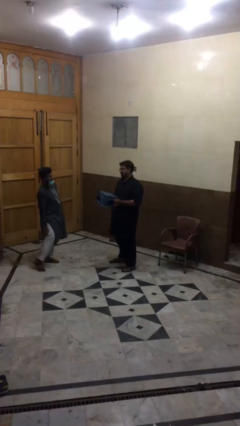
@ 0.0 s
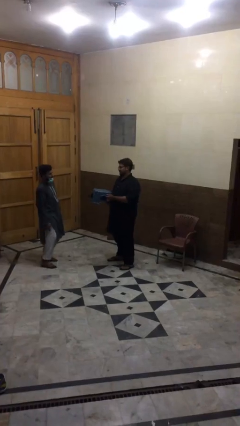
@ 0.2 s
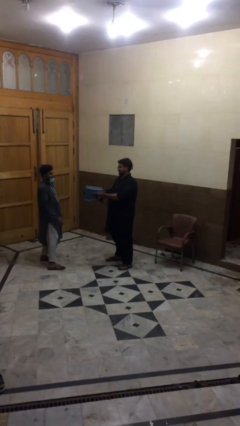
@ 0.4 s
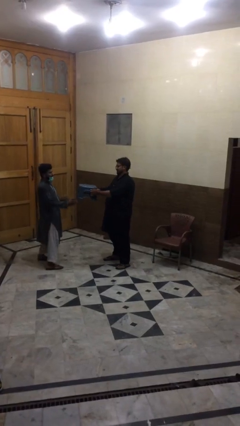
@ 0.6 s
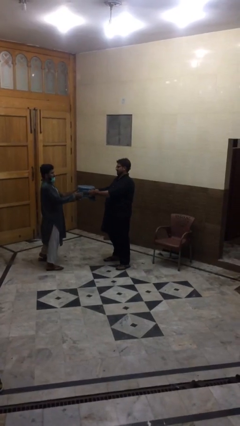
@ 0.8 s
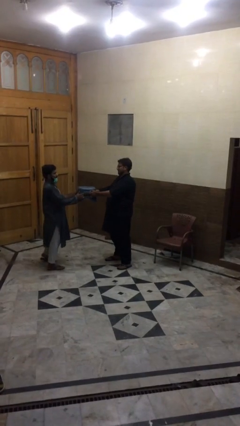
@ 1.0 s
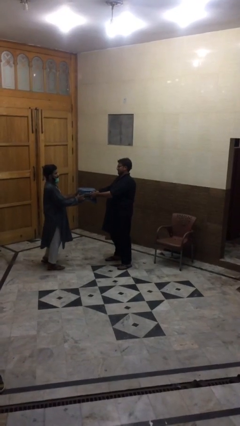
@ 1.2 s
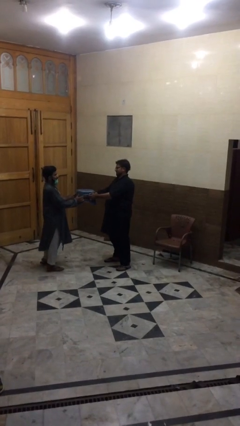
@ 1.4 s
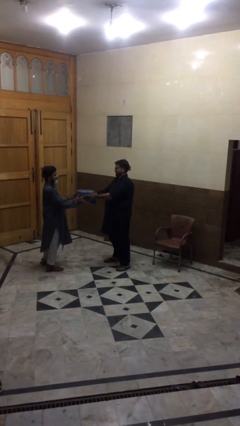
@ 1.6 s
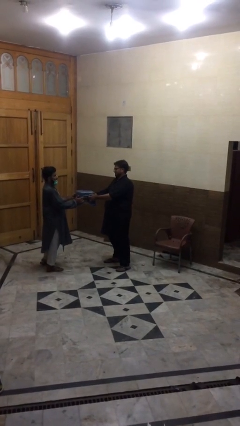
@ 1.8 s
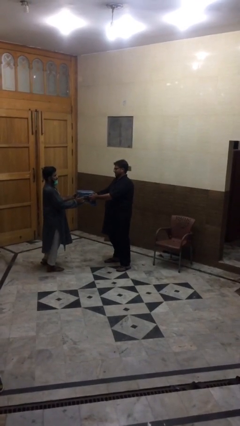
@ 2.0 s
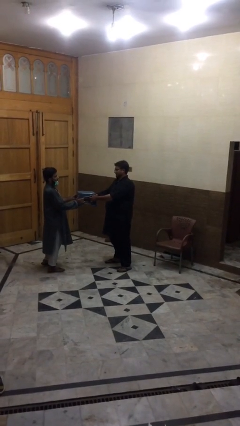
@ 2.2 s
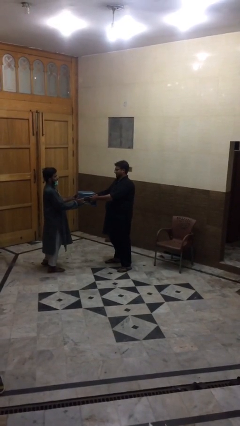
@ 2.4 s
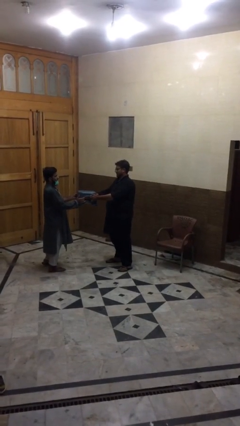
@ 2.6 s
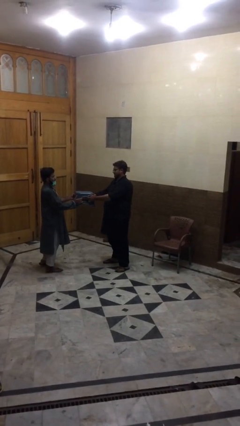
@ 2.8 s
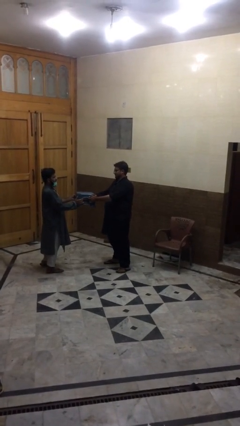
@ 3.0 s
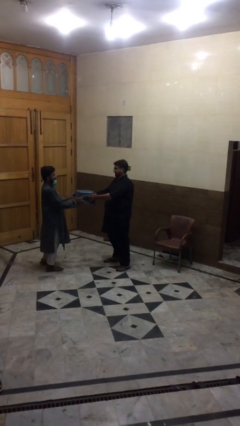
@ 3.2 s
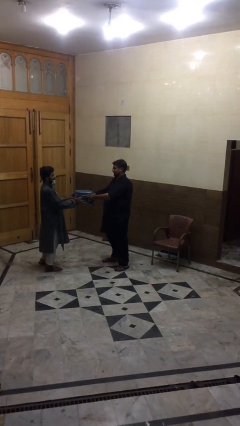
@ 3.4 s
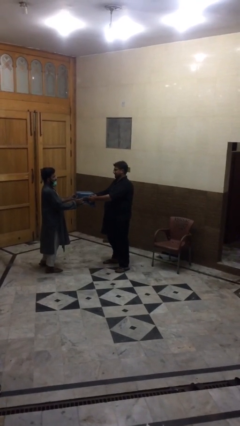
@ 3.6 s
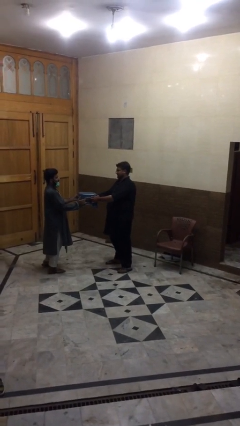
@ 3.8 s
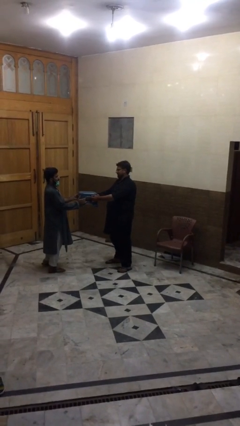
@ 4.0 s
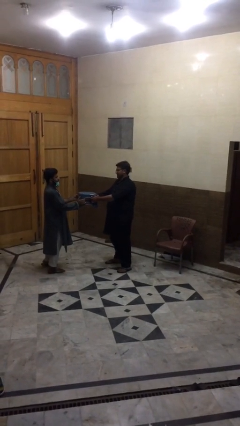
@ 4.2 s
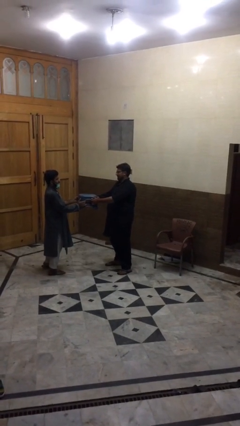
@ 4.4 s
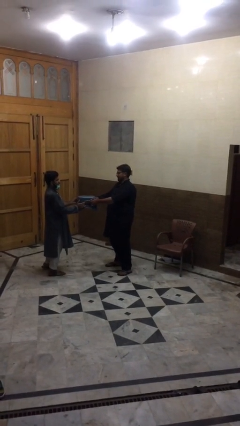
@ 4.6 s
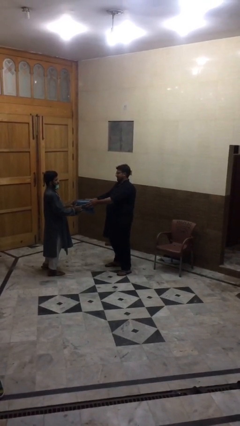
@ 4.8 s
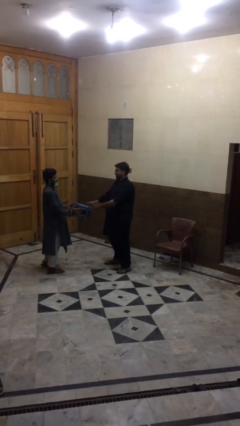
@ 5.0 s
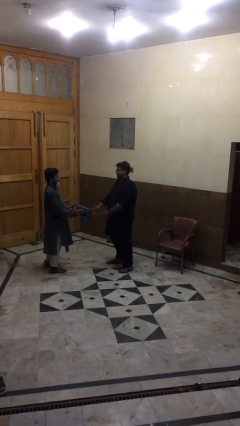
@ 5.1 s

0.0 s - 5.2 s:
person transfers object to person

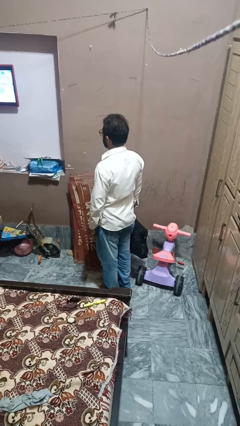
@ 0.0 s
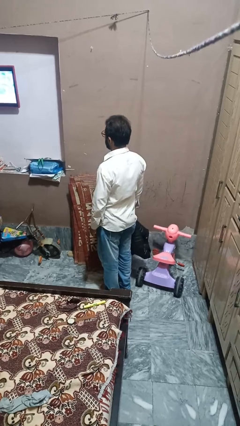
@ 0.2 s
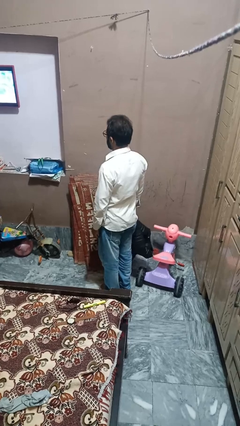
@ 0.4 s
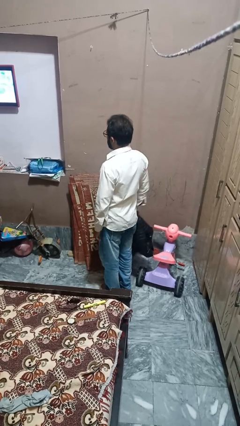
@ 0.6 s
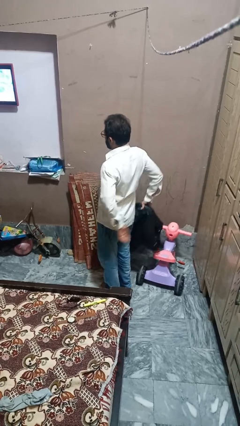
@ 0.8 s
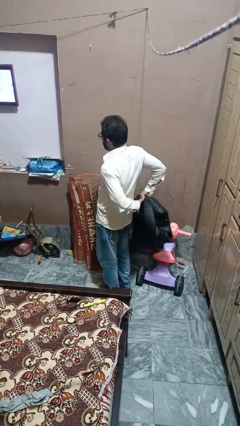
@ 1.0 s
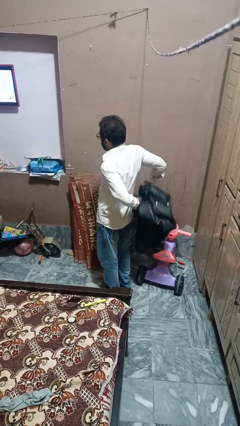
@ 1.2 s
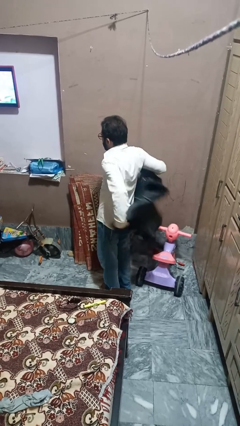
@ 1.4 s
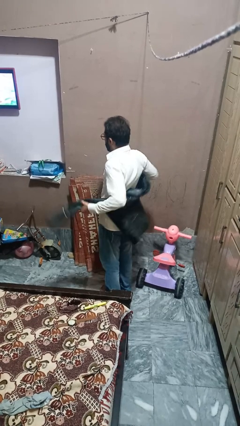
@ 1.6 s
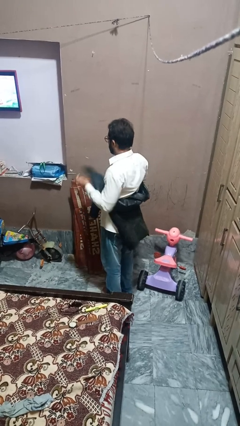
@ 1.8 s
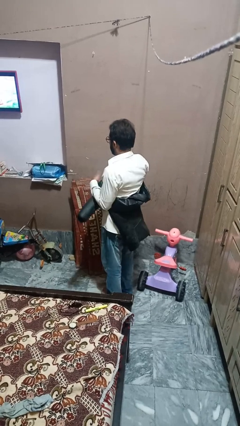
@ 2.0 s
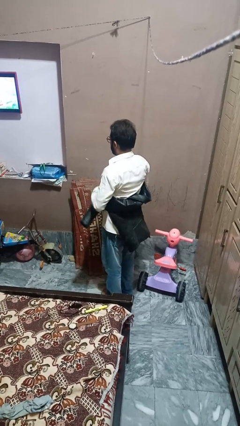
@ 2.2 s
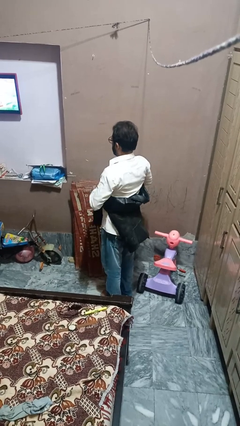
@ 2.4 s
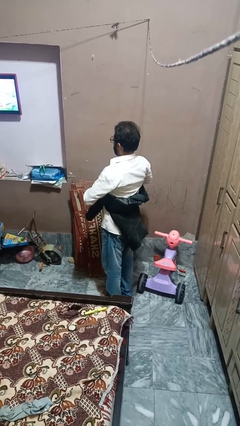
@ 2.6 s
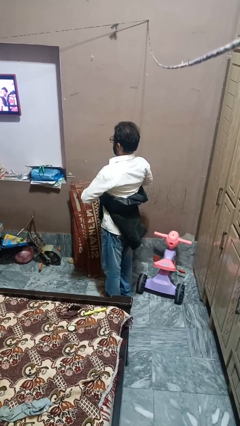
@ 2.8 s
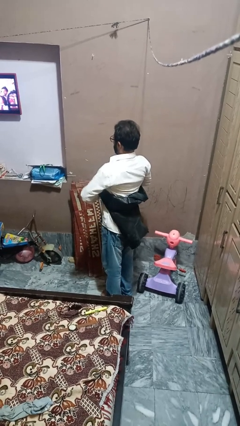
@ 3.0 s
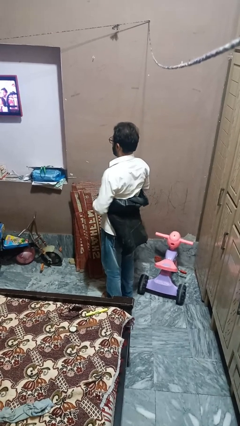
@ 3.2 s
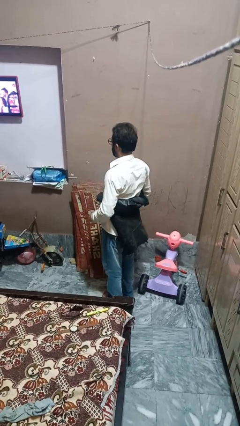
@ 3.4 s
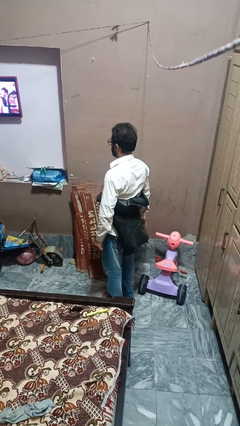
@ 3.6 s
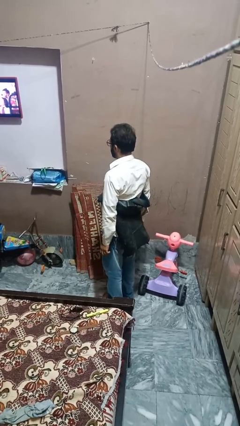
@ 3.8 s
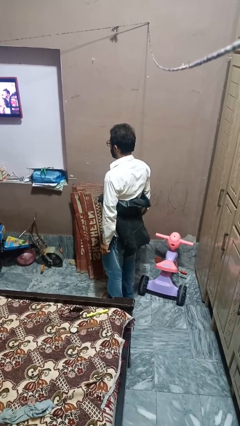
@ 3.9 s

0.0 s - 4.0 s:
person ties jacket around waist

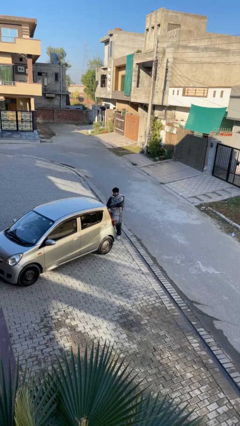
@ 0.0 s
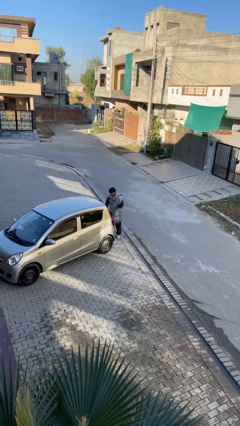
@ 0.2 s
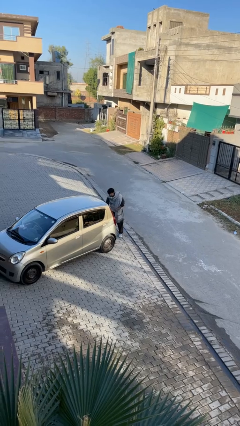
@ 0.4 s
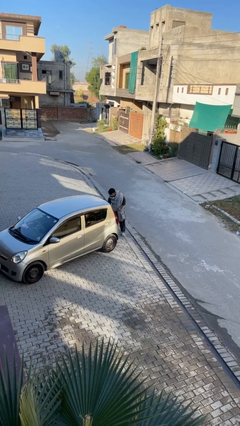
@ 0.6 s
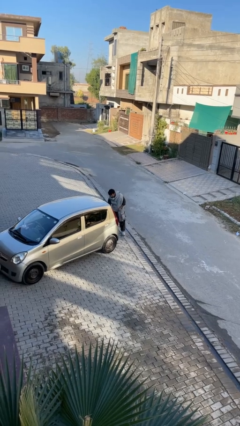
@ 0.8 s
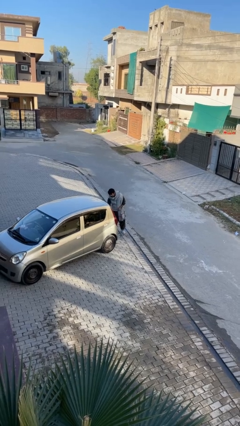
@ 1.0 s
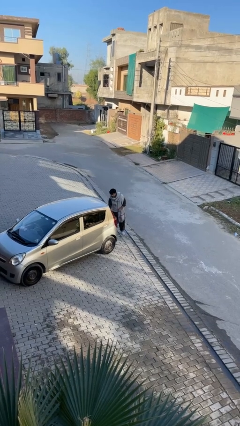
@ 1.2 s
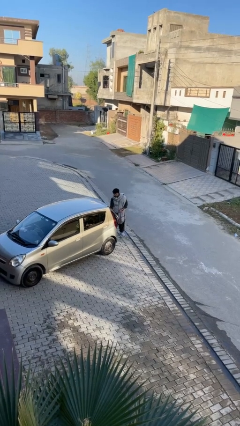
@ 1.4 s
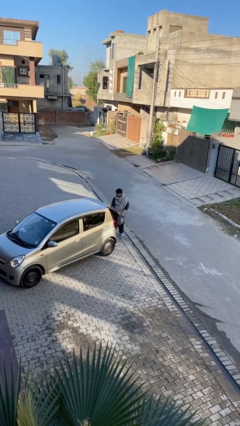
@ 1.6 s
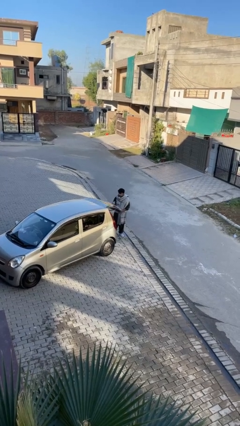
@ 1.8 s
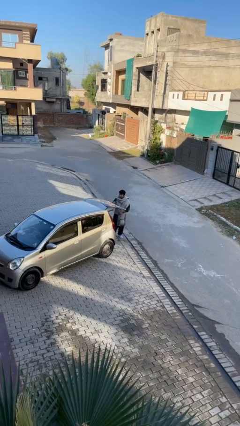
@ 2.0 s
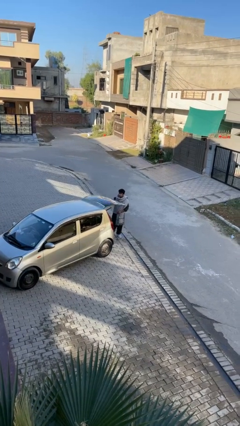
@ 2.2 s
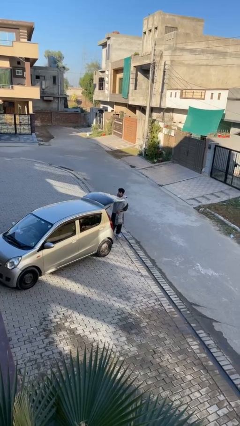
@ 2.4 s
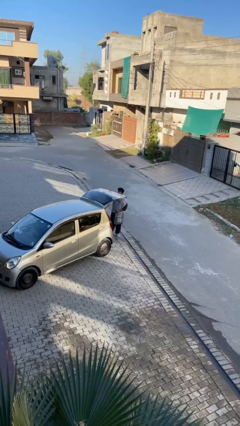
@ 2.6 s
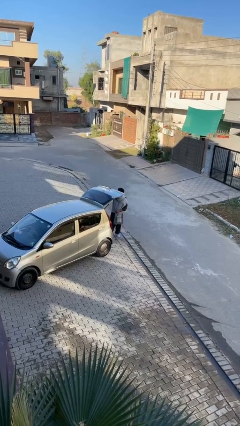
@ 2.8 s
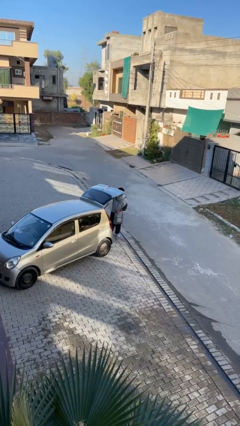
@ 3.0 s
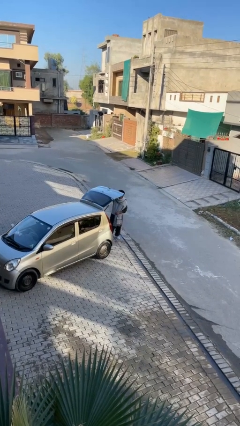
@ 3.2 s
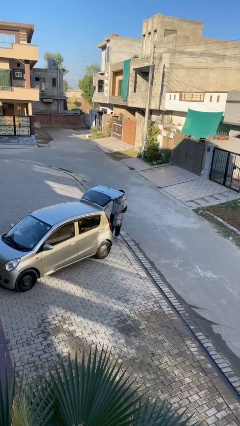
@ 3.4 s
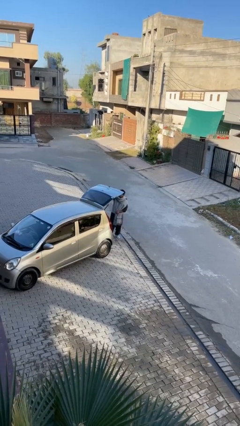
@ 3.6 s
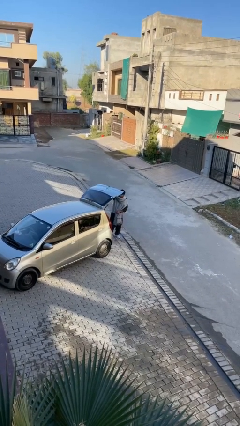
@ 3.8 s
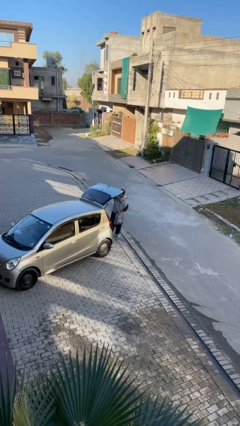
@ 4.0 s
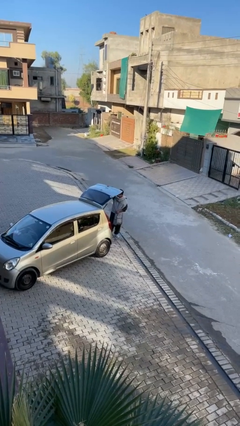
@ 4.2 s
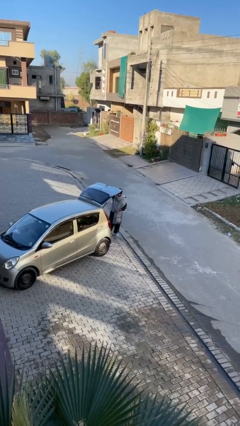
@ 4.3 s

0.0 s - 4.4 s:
person opens car trunk

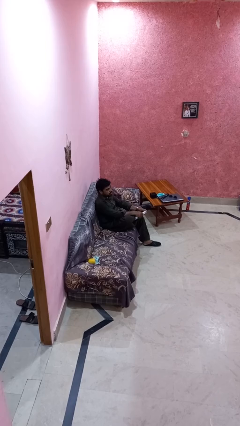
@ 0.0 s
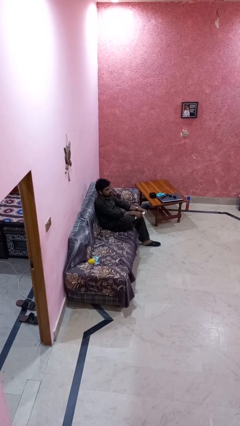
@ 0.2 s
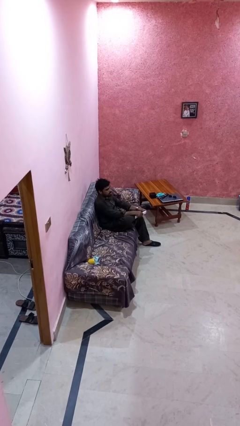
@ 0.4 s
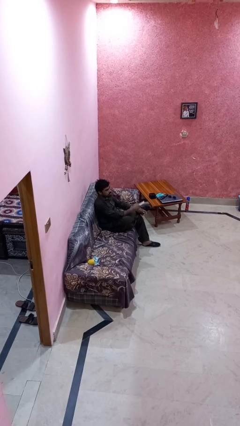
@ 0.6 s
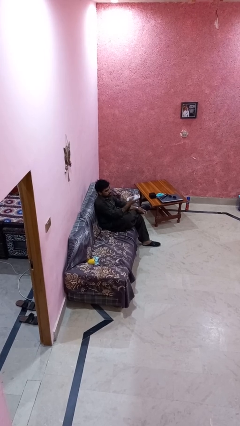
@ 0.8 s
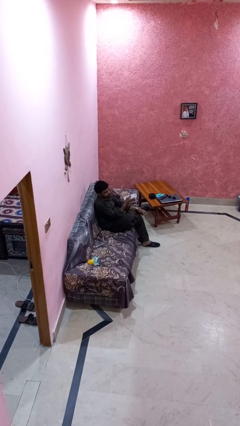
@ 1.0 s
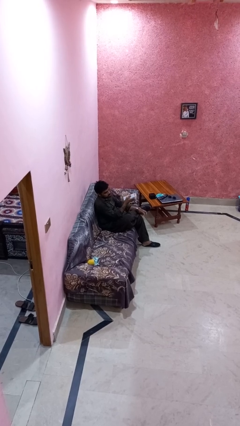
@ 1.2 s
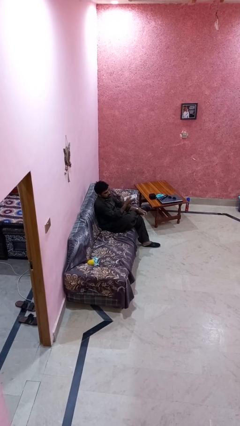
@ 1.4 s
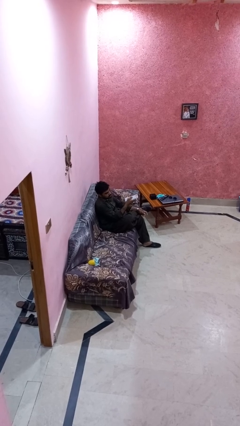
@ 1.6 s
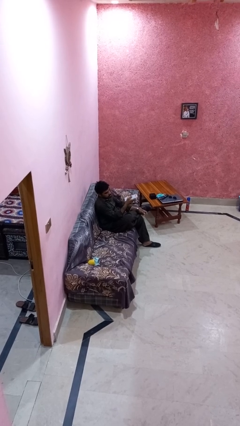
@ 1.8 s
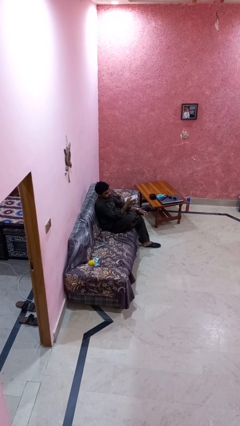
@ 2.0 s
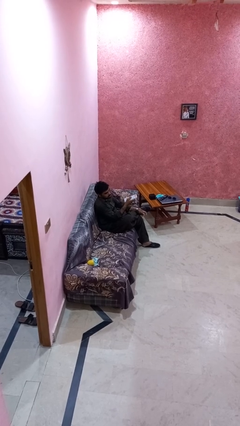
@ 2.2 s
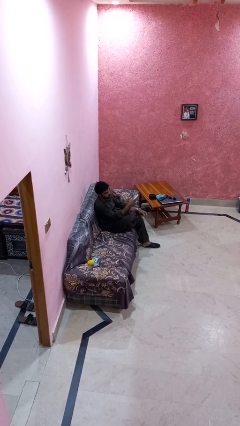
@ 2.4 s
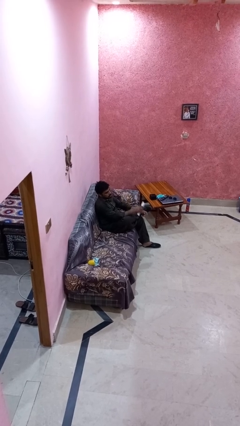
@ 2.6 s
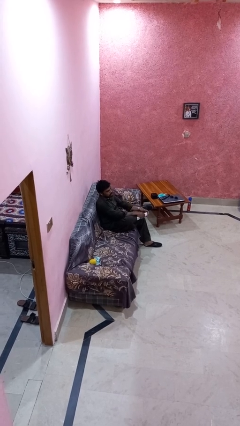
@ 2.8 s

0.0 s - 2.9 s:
person uses television remote

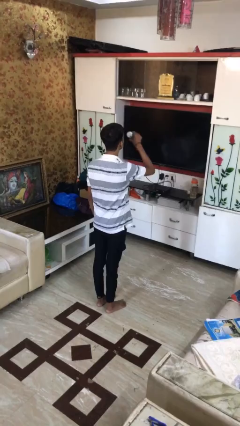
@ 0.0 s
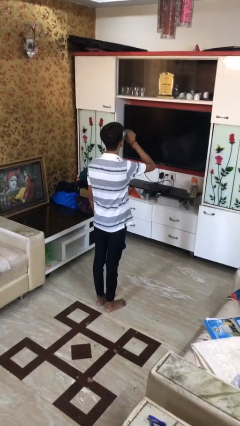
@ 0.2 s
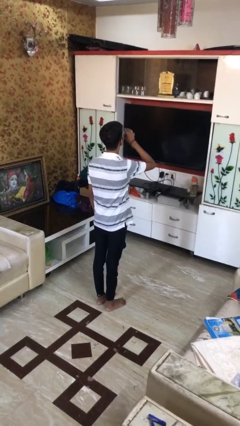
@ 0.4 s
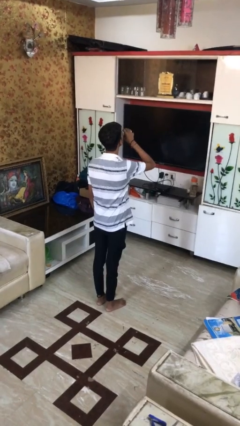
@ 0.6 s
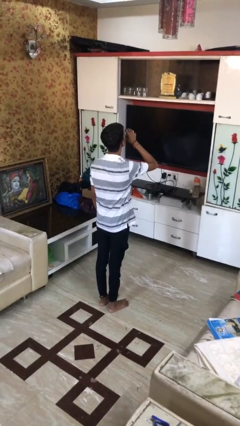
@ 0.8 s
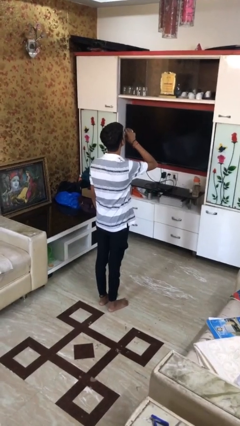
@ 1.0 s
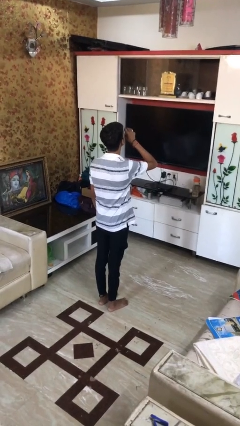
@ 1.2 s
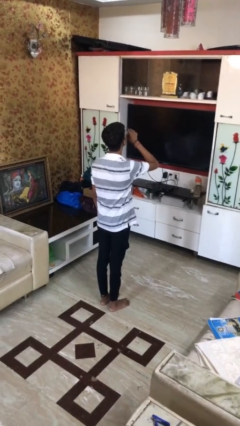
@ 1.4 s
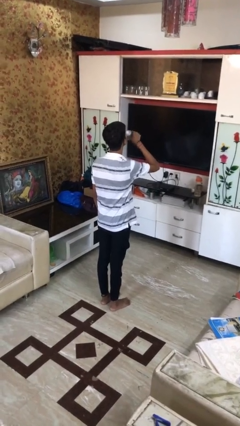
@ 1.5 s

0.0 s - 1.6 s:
person drinks from beverage can
